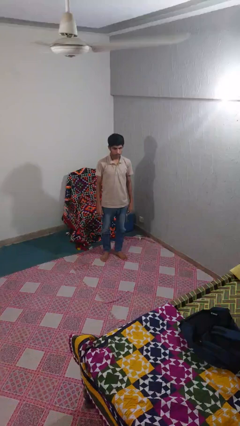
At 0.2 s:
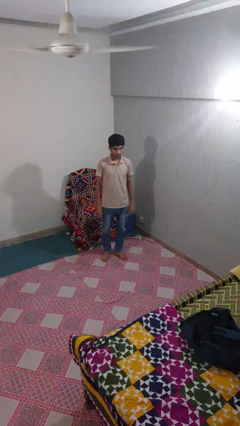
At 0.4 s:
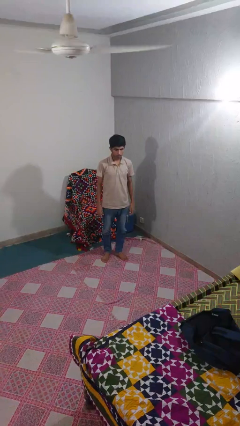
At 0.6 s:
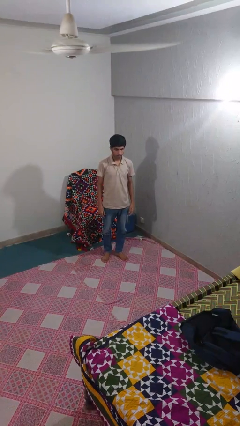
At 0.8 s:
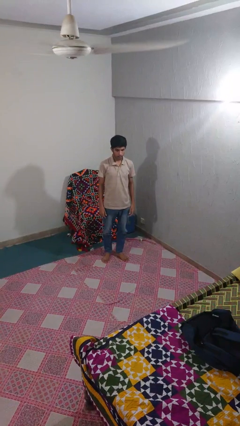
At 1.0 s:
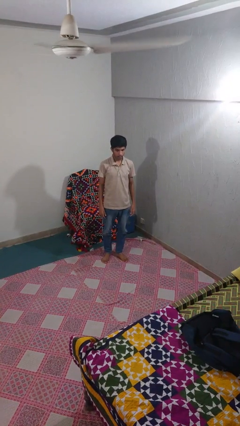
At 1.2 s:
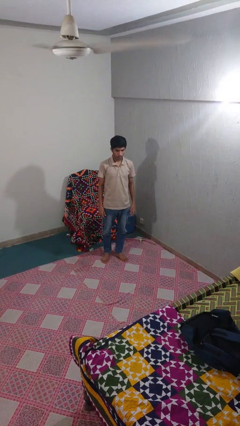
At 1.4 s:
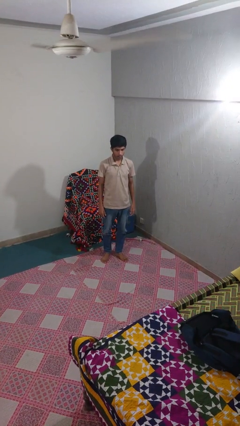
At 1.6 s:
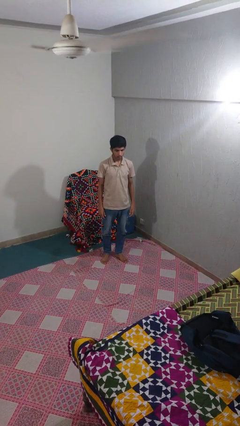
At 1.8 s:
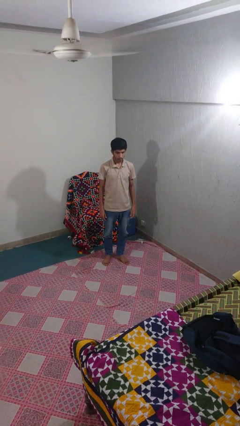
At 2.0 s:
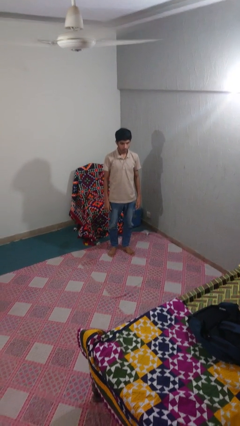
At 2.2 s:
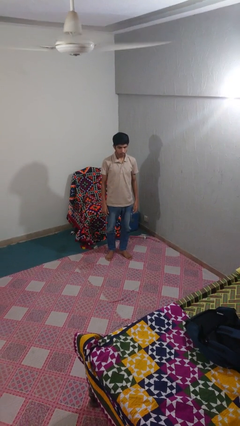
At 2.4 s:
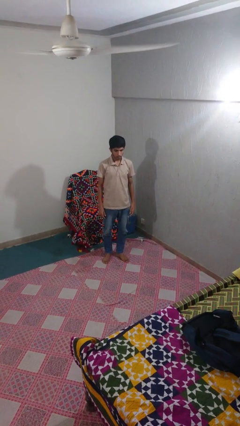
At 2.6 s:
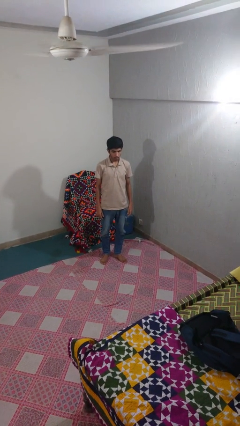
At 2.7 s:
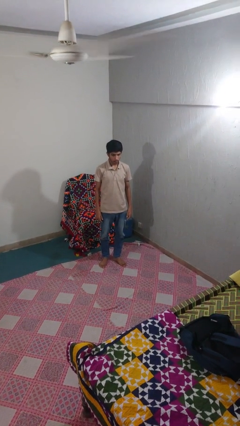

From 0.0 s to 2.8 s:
person stands up from floor

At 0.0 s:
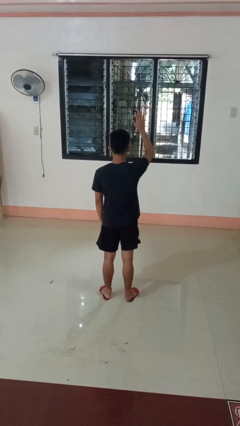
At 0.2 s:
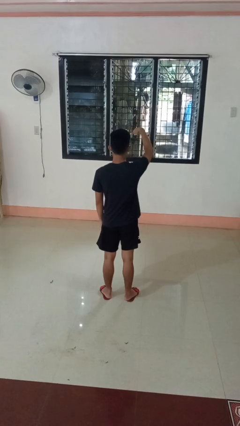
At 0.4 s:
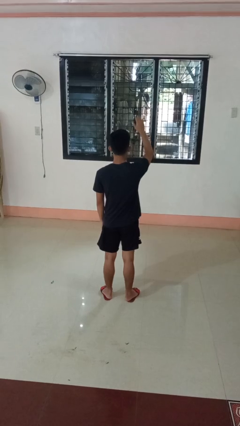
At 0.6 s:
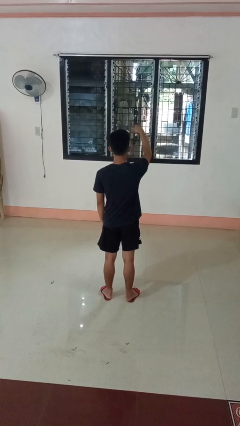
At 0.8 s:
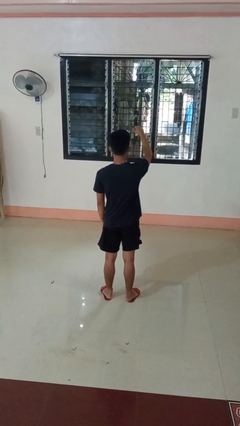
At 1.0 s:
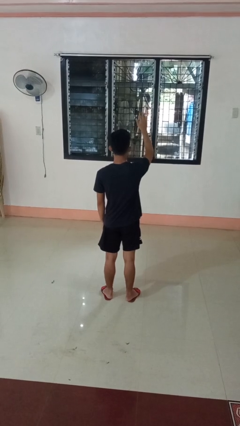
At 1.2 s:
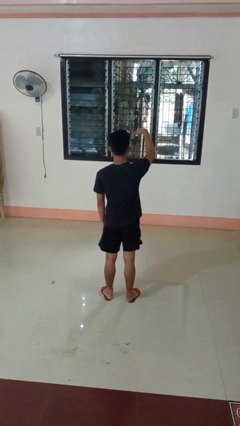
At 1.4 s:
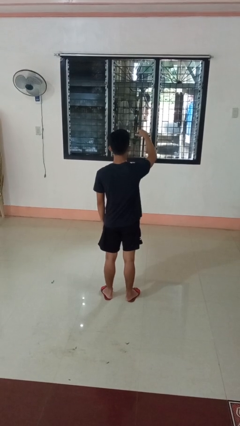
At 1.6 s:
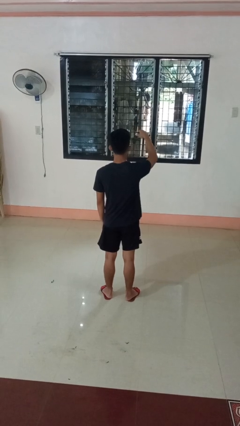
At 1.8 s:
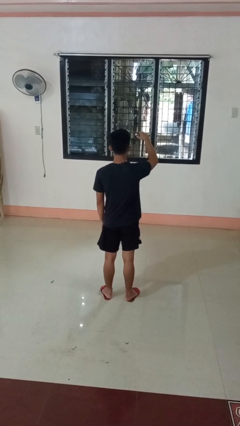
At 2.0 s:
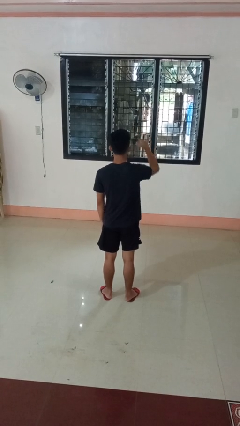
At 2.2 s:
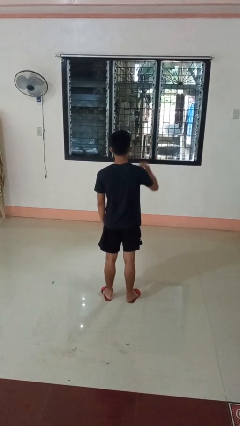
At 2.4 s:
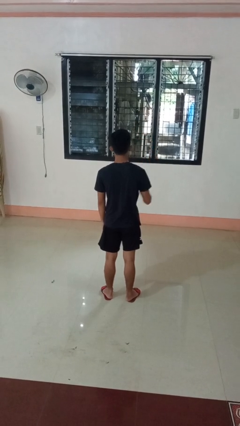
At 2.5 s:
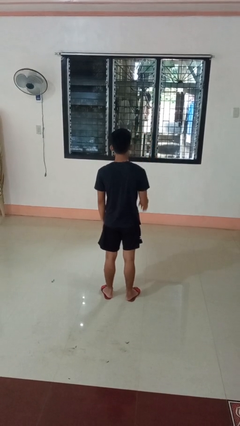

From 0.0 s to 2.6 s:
person gestures come here

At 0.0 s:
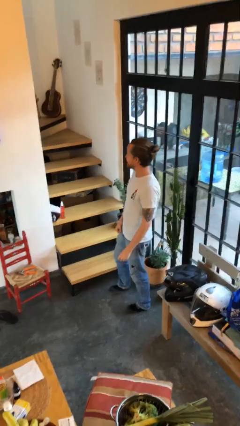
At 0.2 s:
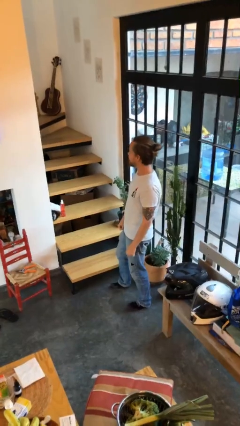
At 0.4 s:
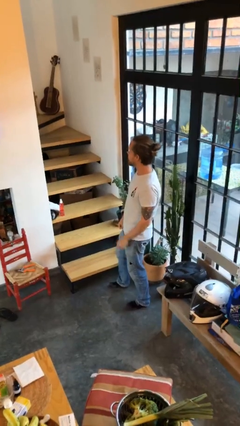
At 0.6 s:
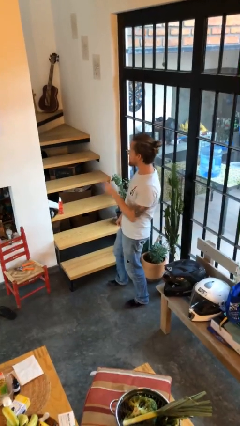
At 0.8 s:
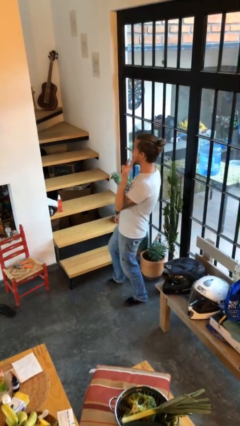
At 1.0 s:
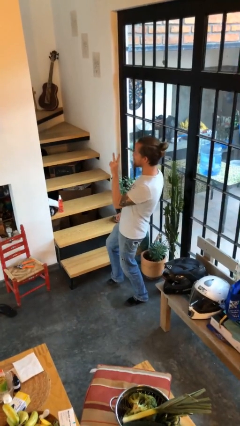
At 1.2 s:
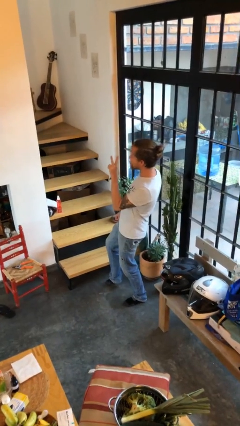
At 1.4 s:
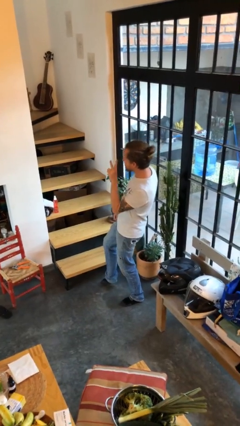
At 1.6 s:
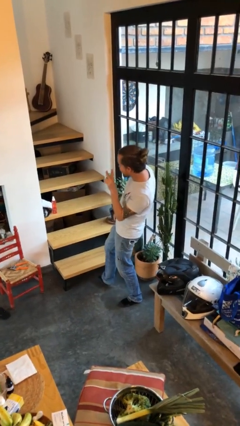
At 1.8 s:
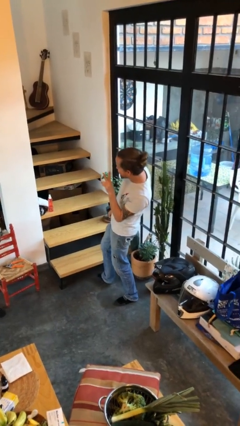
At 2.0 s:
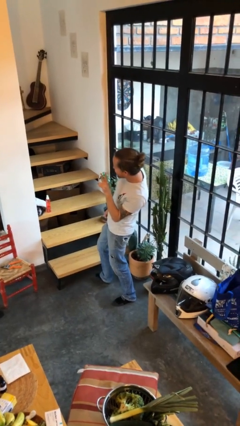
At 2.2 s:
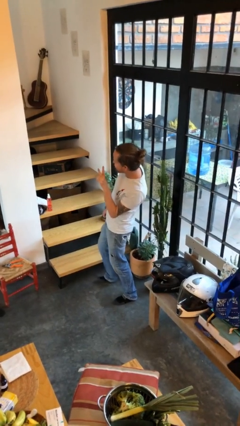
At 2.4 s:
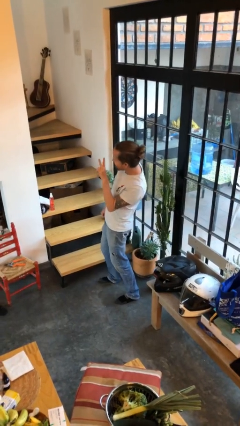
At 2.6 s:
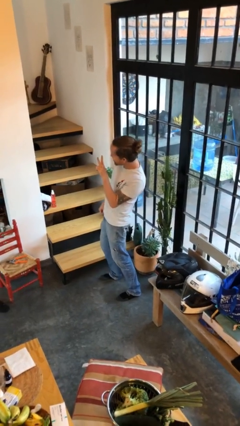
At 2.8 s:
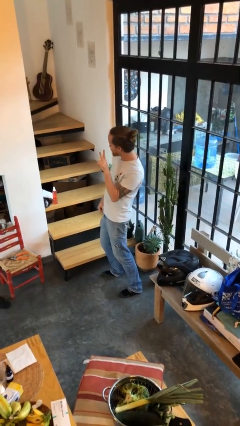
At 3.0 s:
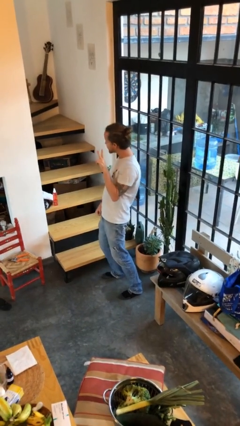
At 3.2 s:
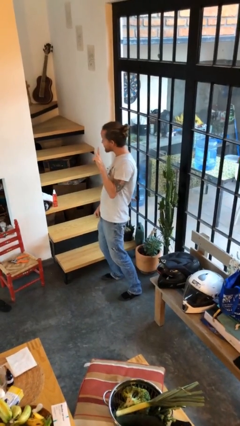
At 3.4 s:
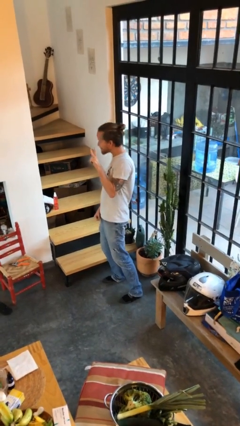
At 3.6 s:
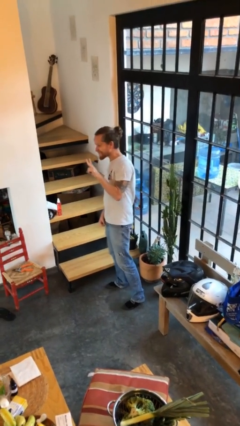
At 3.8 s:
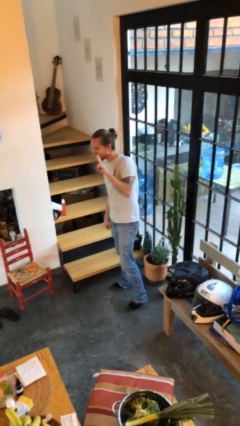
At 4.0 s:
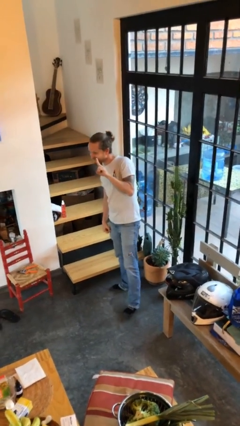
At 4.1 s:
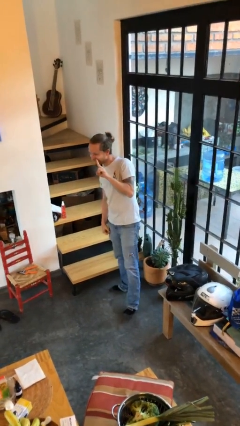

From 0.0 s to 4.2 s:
person gestures peace

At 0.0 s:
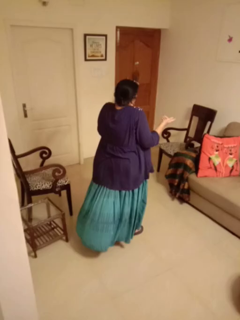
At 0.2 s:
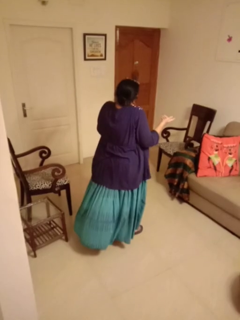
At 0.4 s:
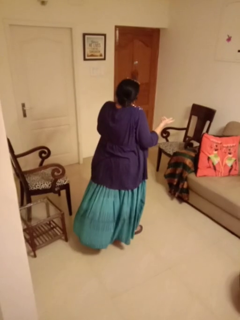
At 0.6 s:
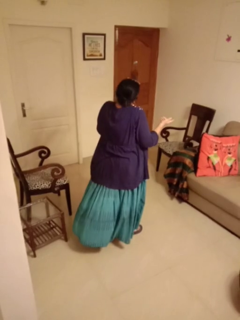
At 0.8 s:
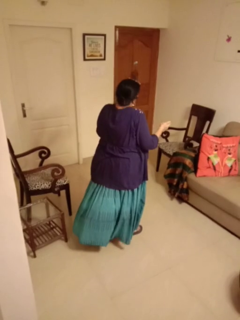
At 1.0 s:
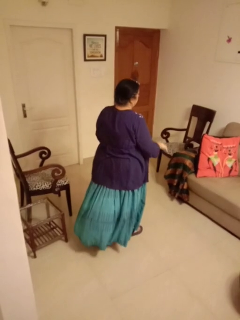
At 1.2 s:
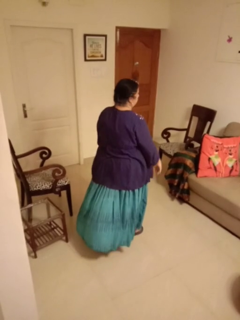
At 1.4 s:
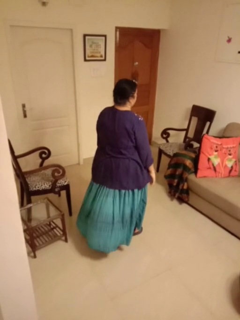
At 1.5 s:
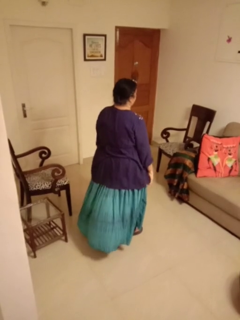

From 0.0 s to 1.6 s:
person shrugs

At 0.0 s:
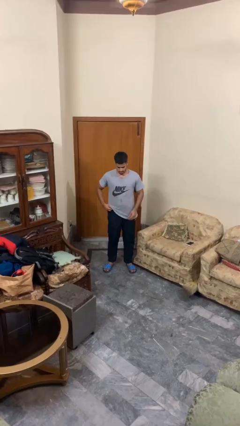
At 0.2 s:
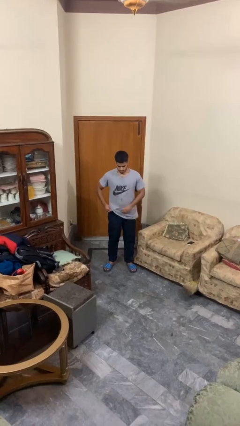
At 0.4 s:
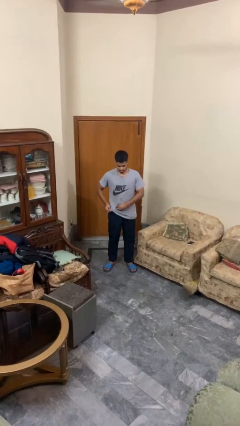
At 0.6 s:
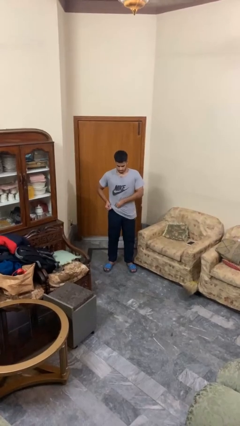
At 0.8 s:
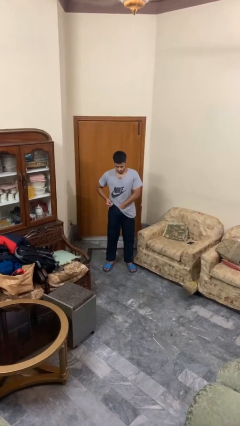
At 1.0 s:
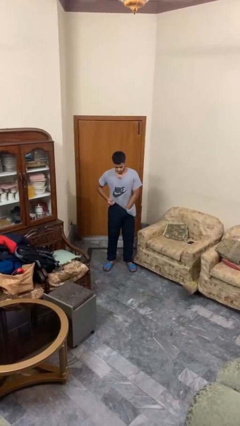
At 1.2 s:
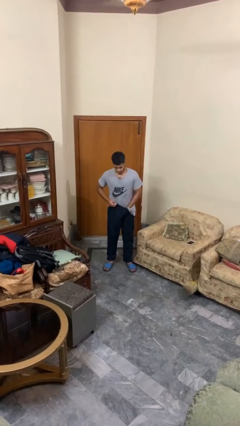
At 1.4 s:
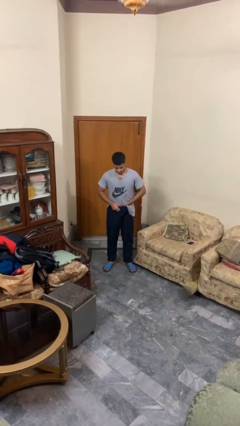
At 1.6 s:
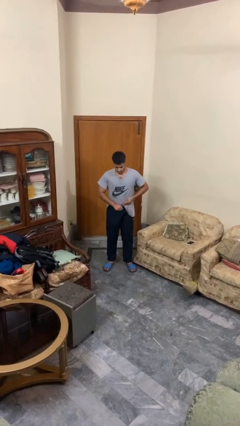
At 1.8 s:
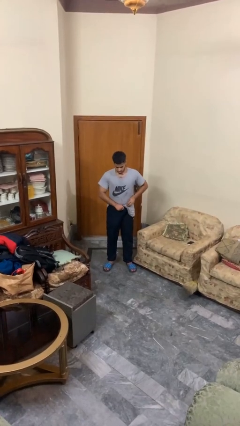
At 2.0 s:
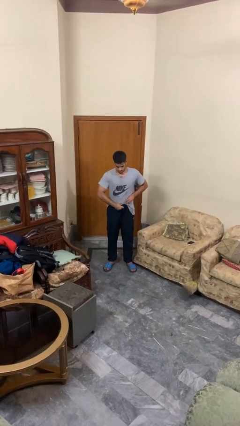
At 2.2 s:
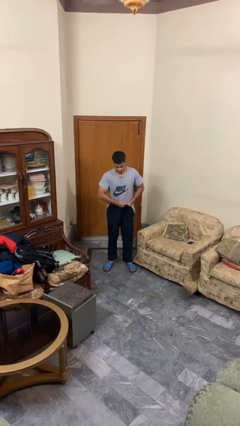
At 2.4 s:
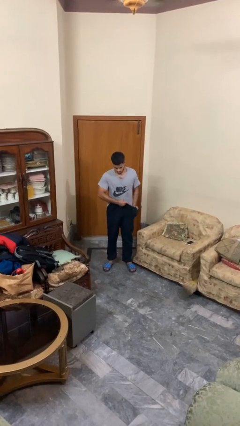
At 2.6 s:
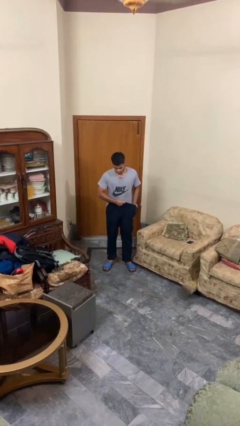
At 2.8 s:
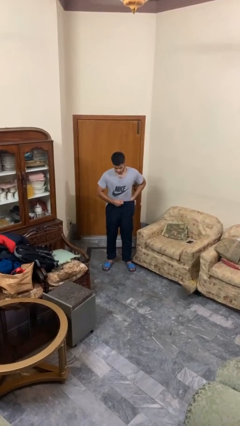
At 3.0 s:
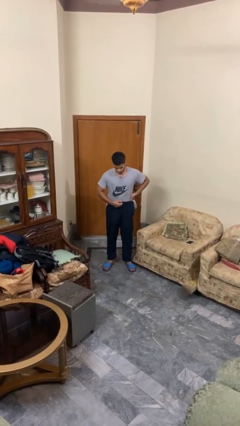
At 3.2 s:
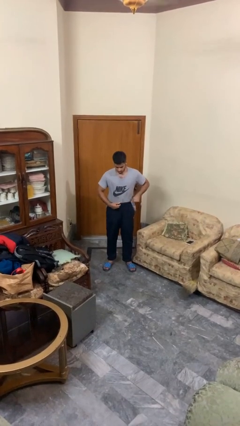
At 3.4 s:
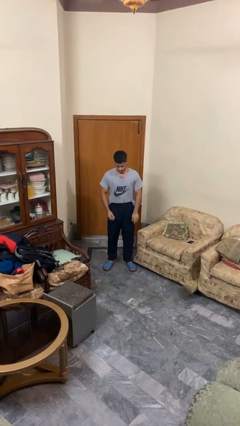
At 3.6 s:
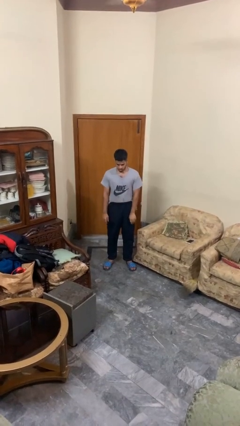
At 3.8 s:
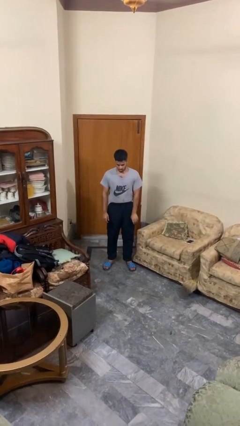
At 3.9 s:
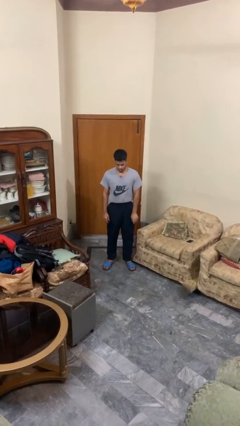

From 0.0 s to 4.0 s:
person tucks in shirt

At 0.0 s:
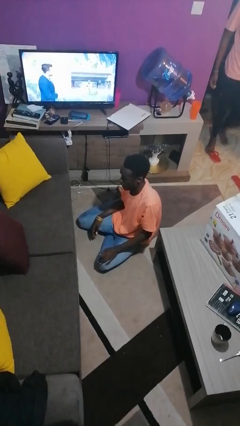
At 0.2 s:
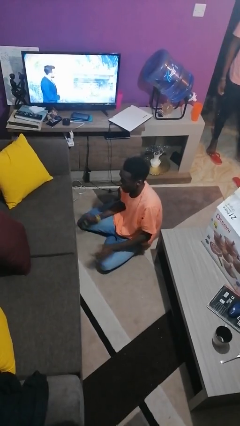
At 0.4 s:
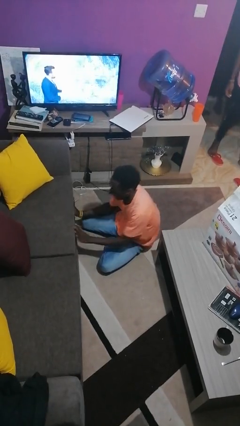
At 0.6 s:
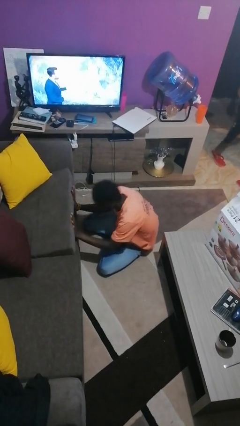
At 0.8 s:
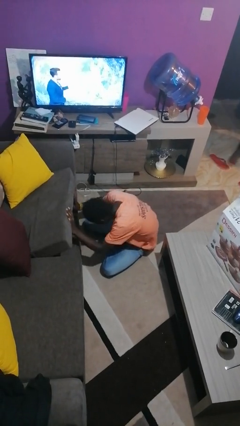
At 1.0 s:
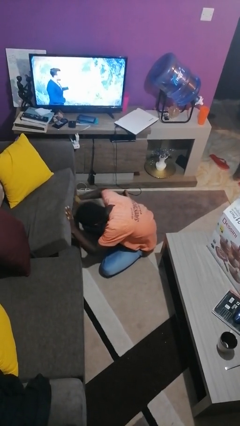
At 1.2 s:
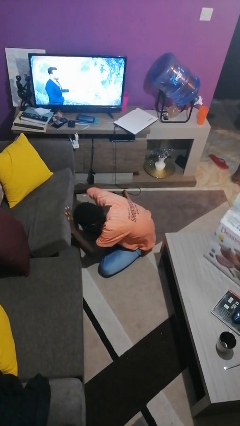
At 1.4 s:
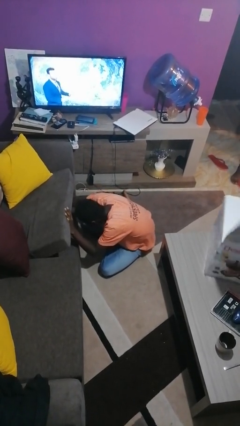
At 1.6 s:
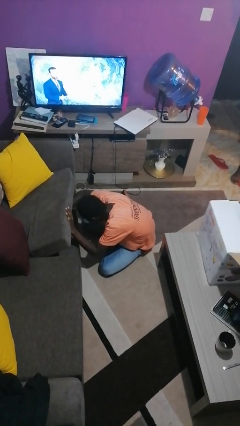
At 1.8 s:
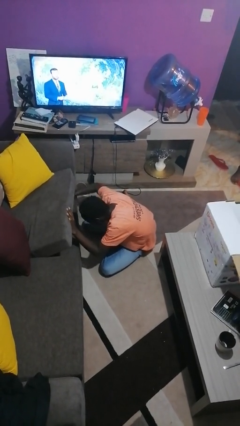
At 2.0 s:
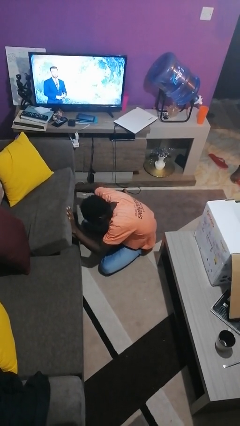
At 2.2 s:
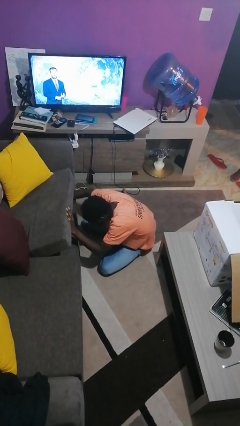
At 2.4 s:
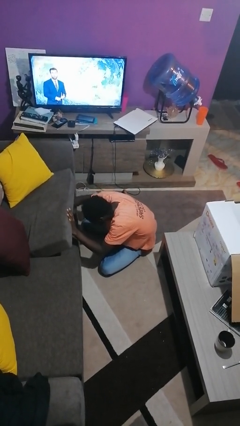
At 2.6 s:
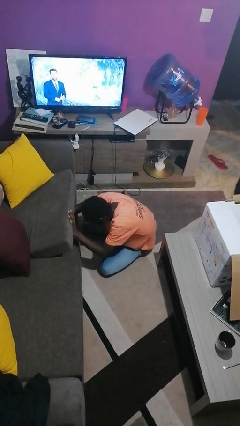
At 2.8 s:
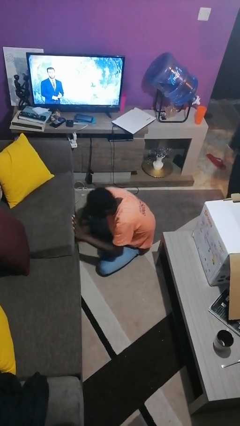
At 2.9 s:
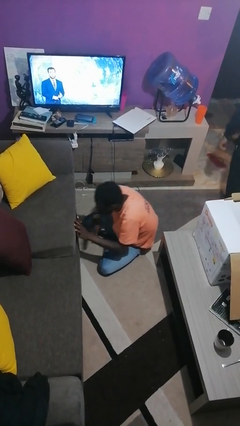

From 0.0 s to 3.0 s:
person searches under couch
